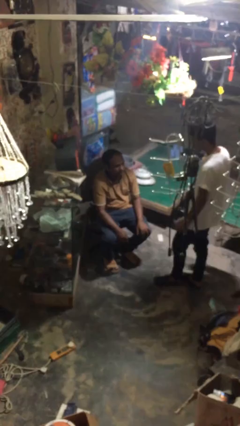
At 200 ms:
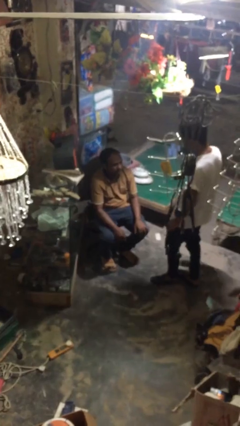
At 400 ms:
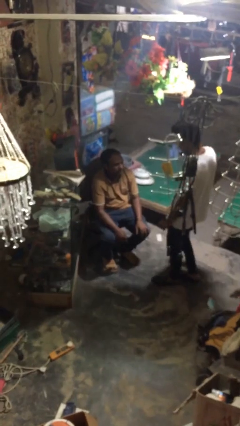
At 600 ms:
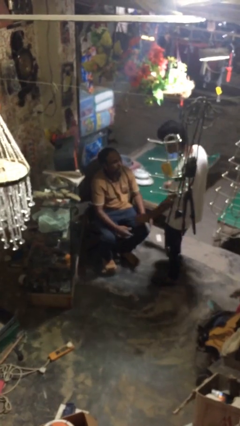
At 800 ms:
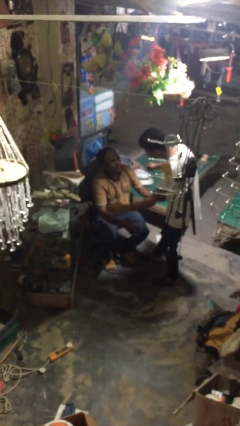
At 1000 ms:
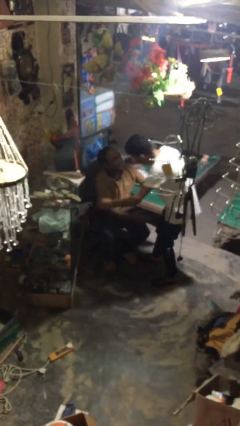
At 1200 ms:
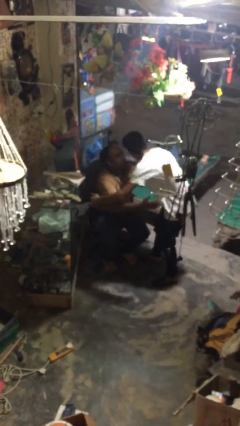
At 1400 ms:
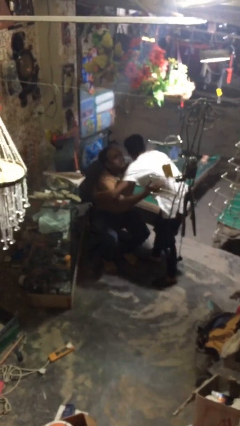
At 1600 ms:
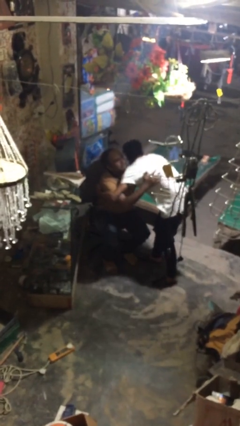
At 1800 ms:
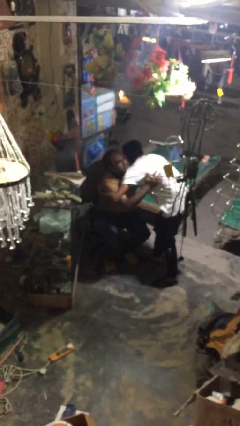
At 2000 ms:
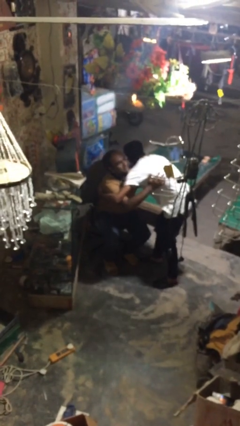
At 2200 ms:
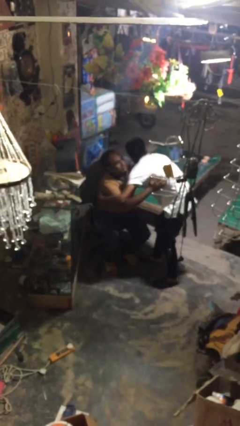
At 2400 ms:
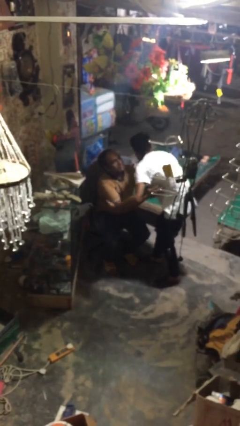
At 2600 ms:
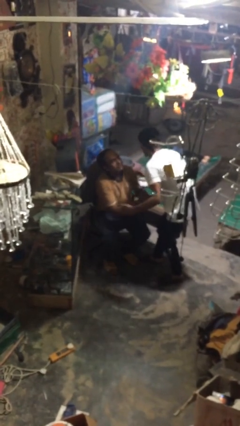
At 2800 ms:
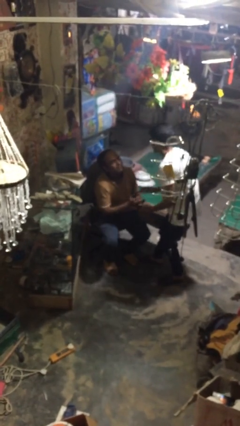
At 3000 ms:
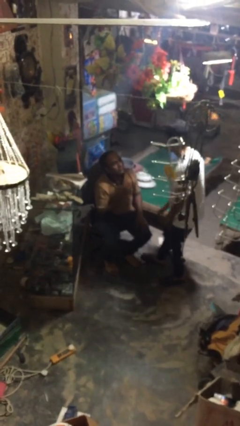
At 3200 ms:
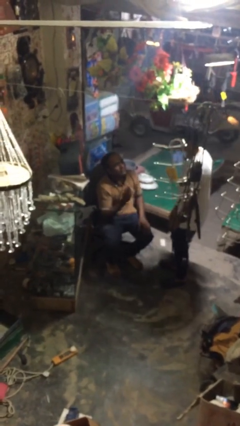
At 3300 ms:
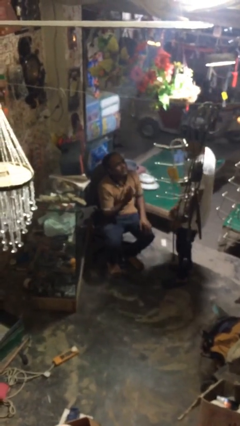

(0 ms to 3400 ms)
person embraces person

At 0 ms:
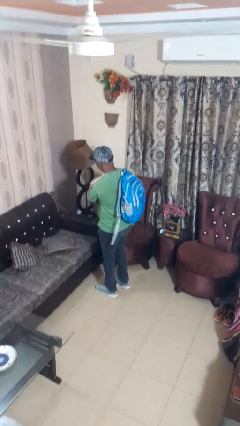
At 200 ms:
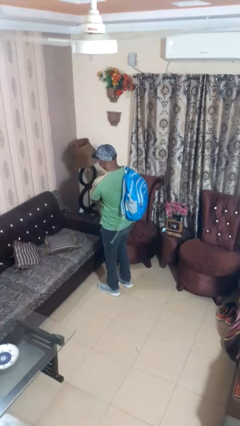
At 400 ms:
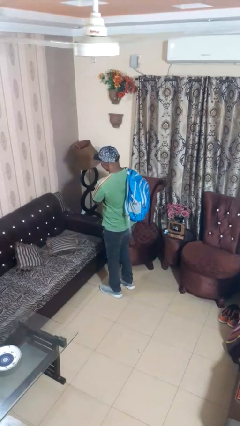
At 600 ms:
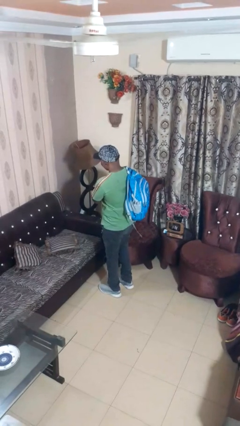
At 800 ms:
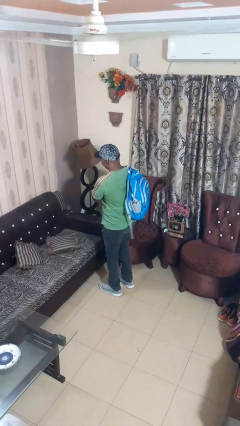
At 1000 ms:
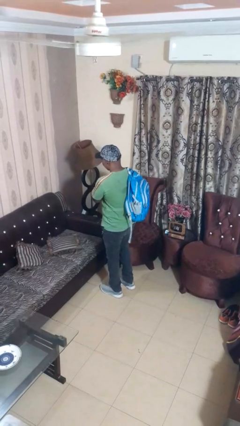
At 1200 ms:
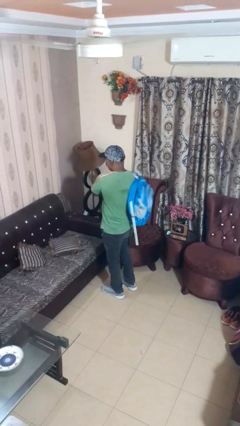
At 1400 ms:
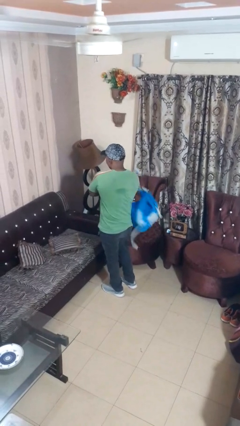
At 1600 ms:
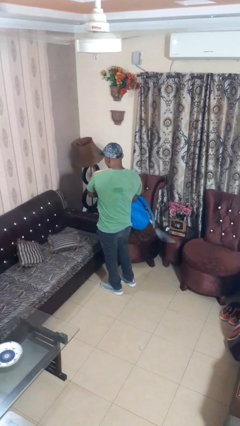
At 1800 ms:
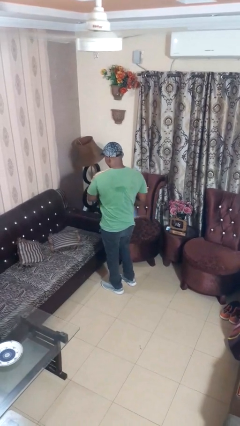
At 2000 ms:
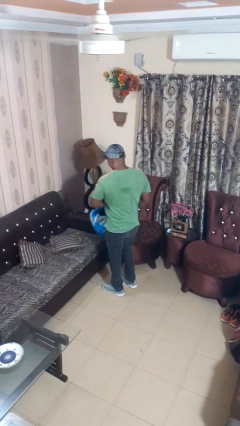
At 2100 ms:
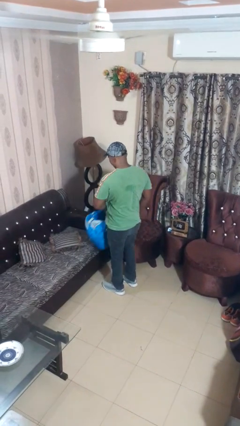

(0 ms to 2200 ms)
person takes off backpack

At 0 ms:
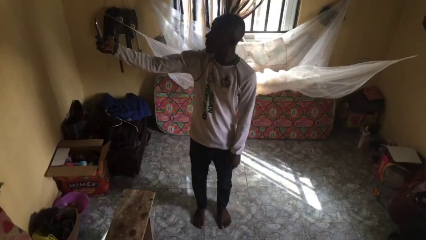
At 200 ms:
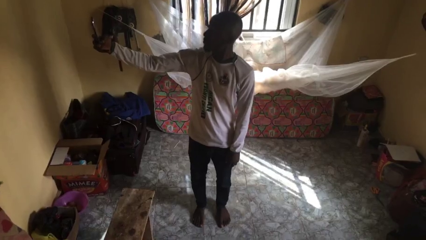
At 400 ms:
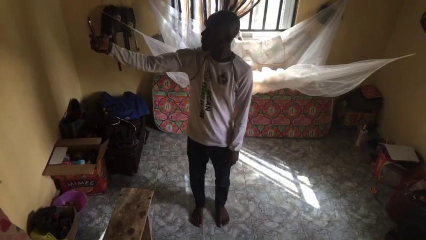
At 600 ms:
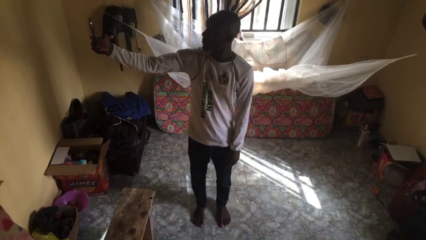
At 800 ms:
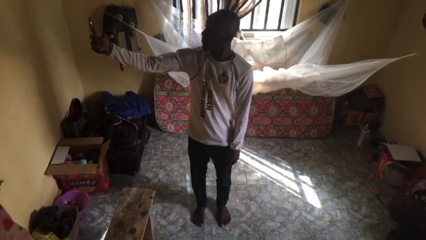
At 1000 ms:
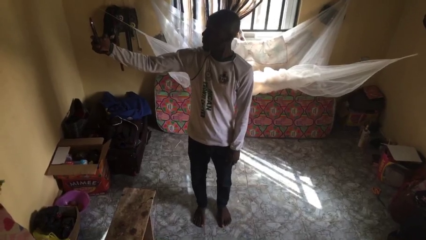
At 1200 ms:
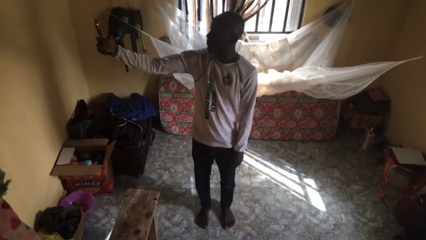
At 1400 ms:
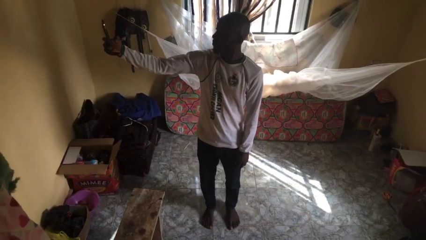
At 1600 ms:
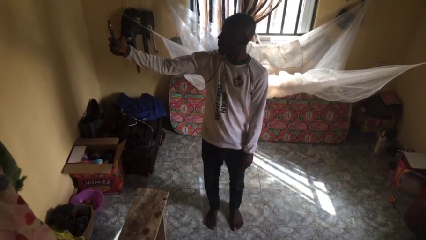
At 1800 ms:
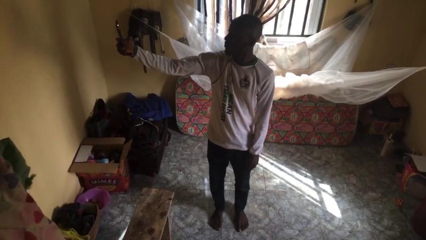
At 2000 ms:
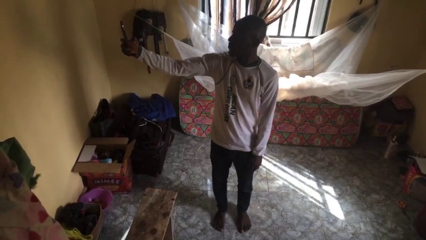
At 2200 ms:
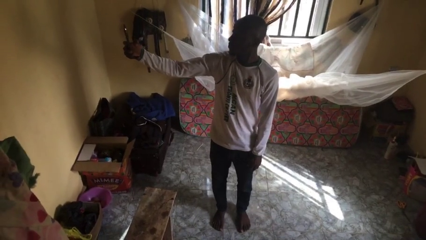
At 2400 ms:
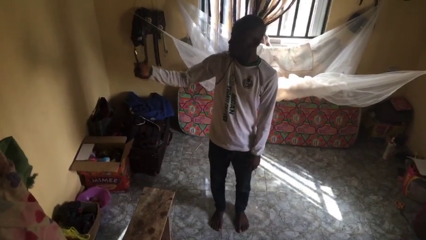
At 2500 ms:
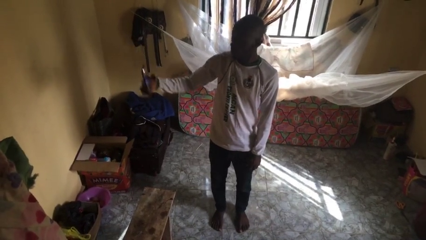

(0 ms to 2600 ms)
person takes selfie

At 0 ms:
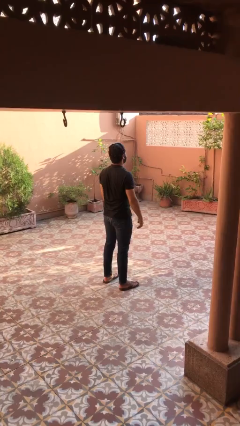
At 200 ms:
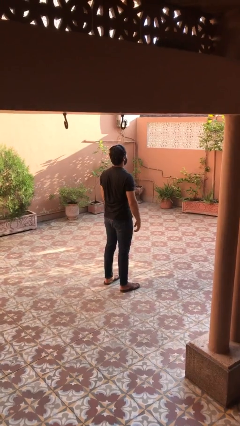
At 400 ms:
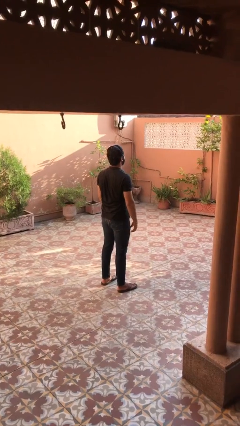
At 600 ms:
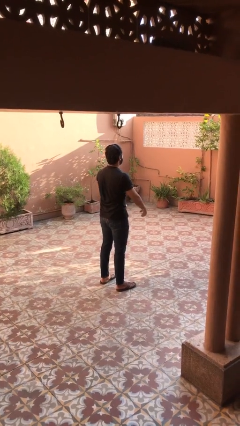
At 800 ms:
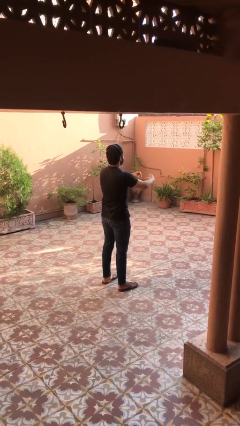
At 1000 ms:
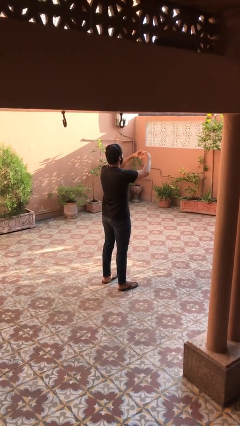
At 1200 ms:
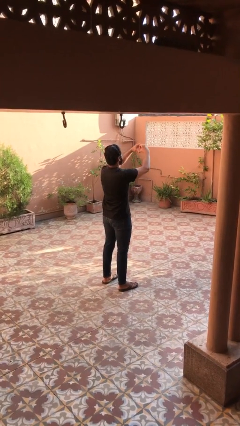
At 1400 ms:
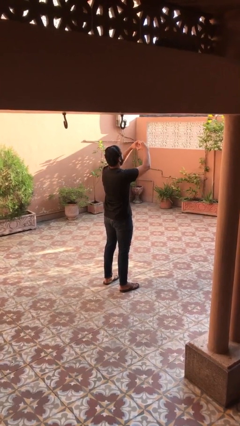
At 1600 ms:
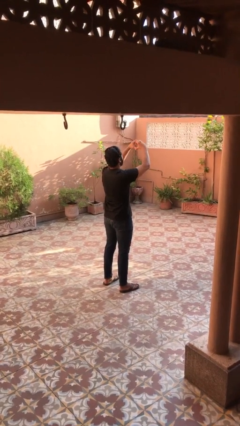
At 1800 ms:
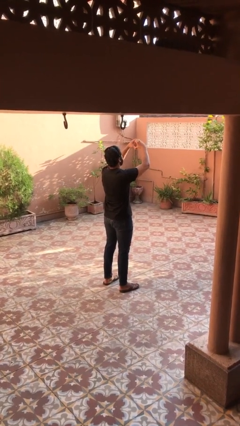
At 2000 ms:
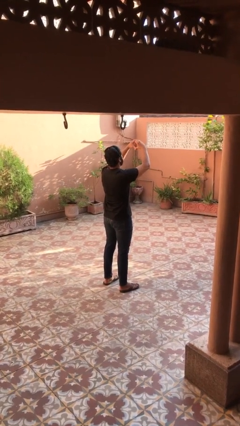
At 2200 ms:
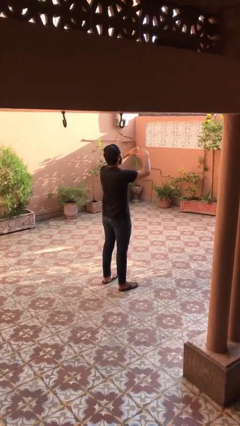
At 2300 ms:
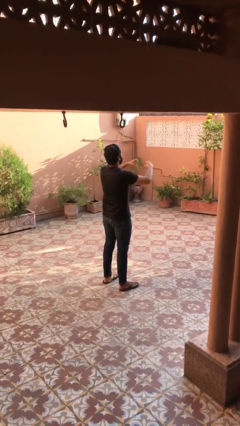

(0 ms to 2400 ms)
person gestures heart

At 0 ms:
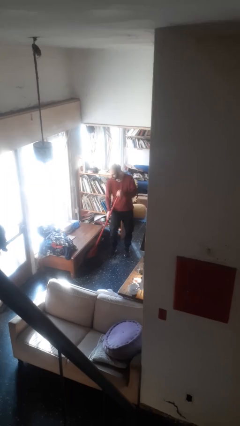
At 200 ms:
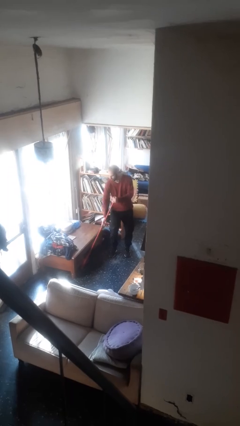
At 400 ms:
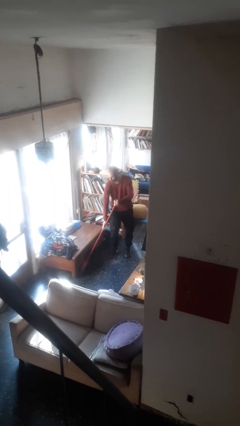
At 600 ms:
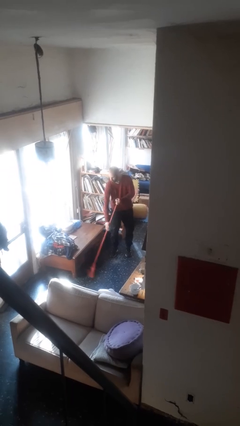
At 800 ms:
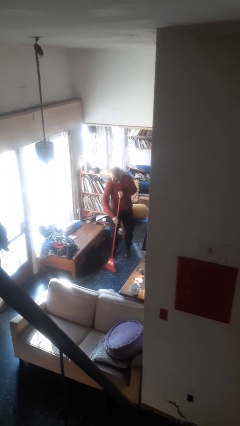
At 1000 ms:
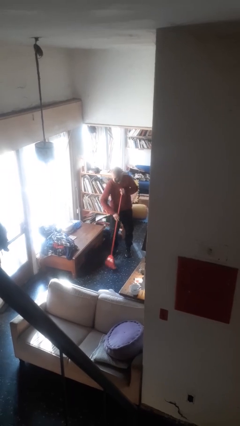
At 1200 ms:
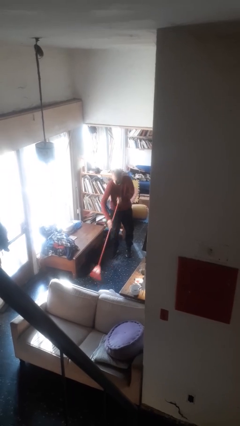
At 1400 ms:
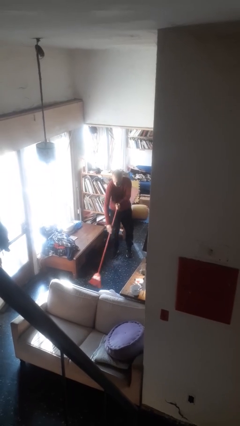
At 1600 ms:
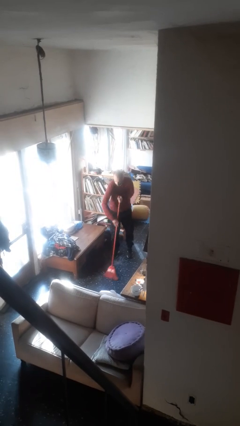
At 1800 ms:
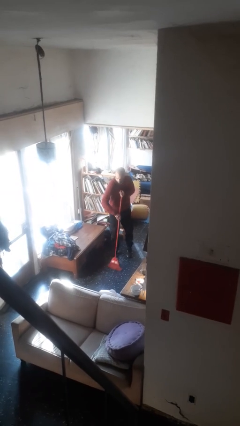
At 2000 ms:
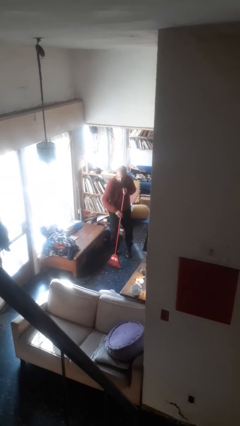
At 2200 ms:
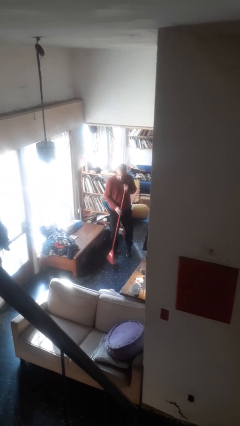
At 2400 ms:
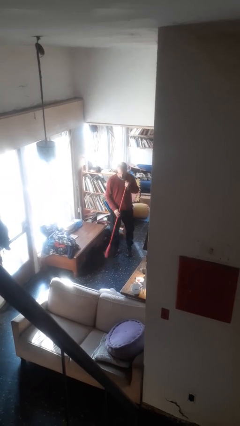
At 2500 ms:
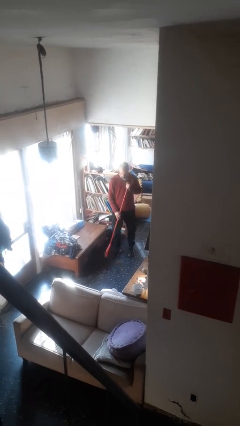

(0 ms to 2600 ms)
person sweeps floor

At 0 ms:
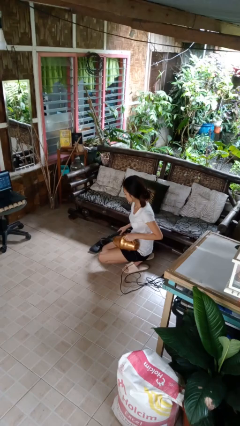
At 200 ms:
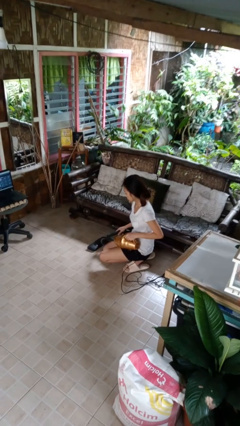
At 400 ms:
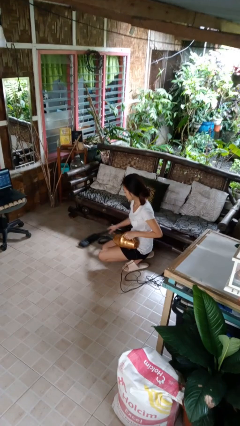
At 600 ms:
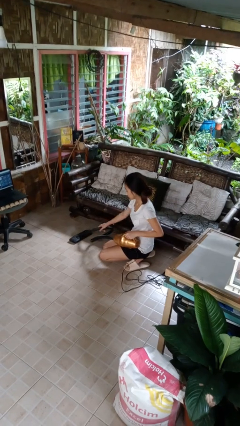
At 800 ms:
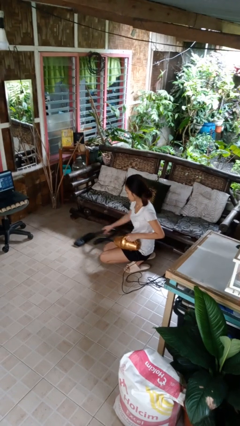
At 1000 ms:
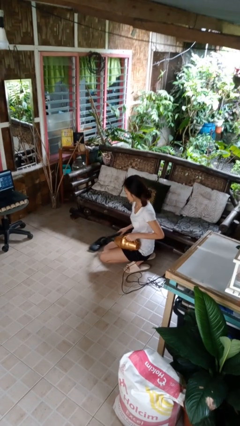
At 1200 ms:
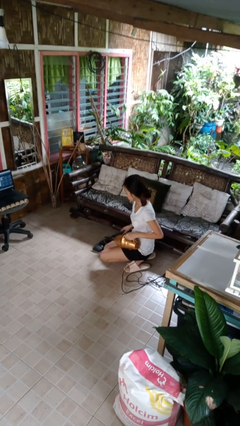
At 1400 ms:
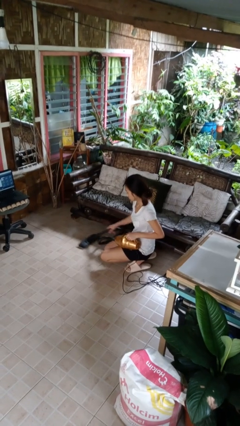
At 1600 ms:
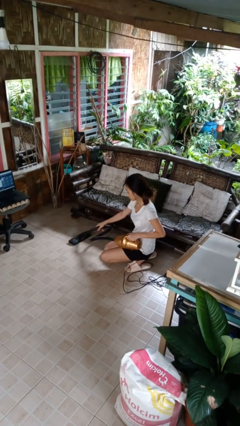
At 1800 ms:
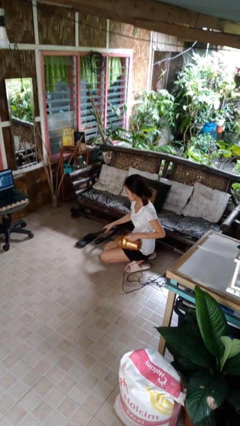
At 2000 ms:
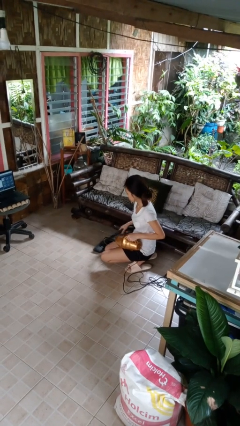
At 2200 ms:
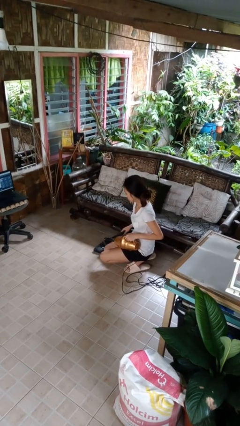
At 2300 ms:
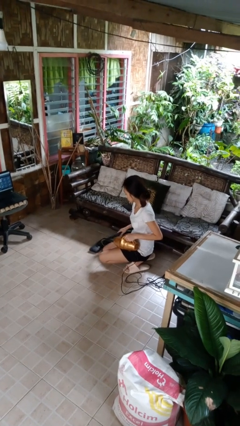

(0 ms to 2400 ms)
person vacuums carpet

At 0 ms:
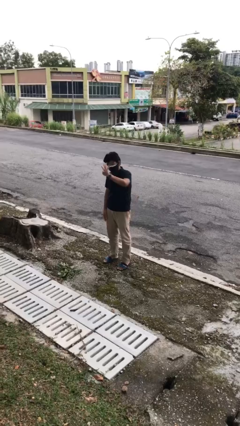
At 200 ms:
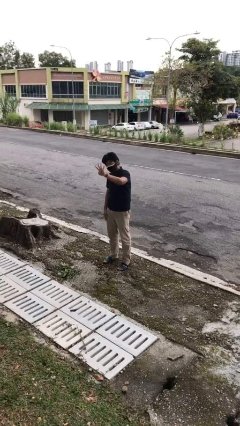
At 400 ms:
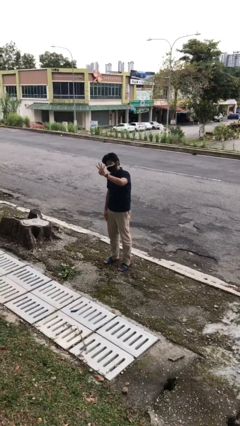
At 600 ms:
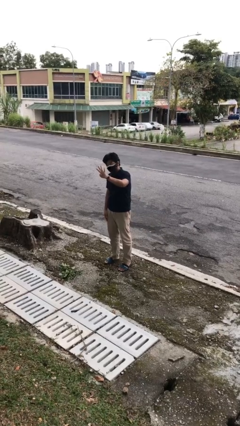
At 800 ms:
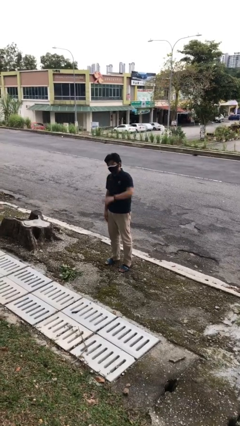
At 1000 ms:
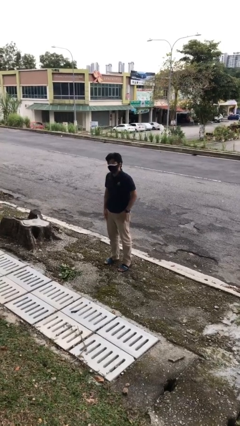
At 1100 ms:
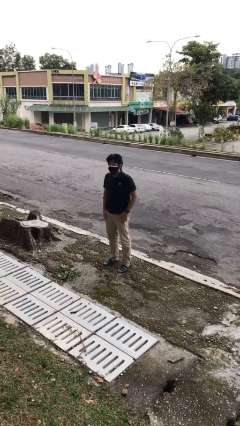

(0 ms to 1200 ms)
person gestures number four
